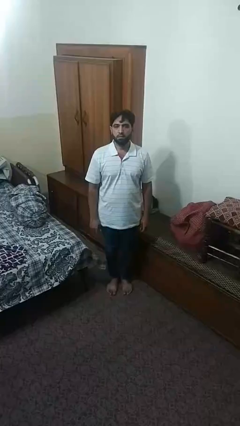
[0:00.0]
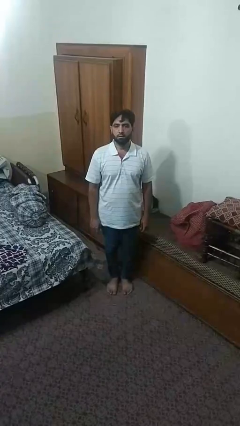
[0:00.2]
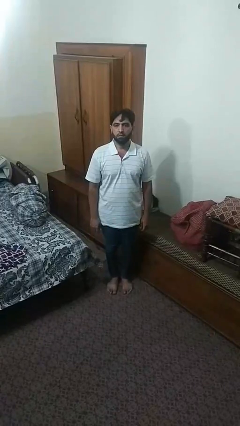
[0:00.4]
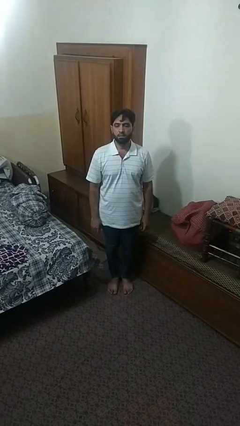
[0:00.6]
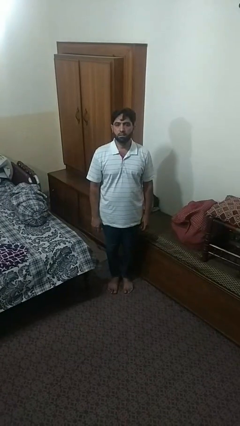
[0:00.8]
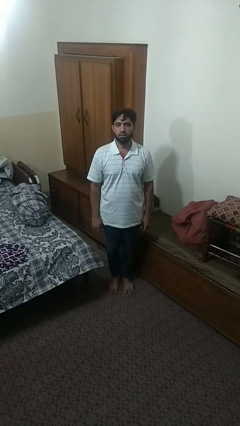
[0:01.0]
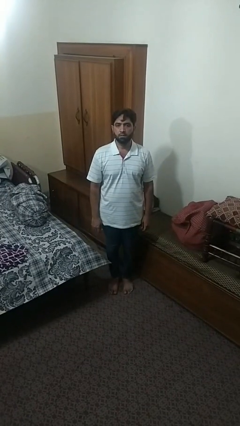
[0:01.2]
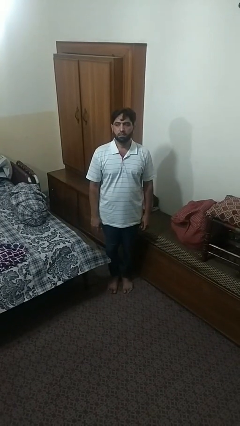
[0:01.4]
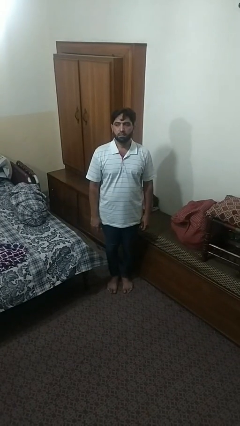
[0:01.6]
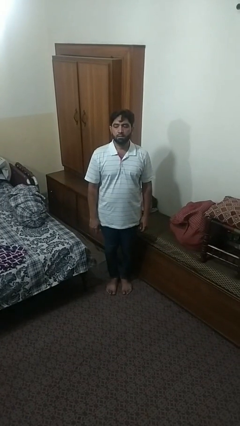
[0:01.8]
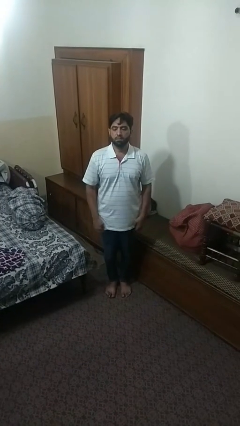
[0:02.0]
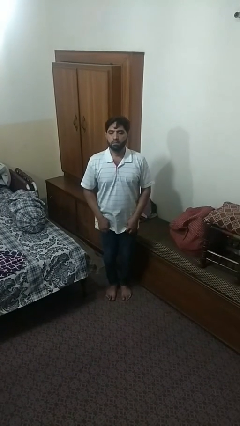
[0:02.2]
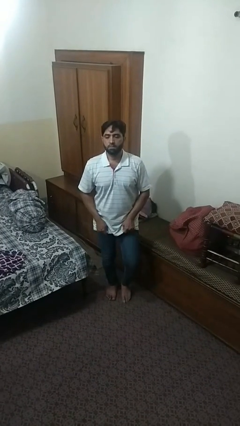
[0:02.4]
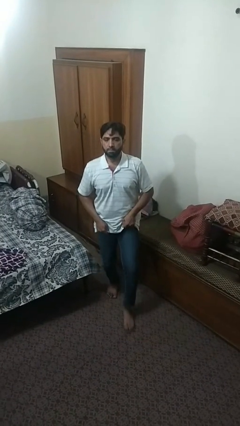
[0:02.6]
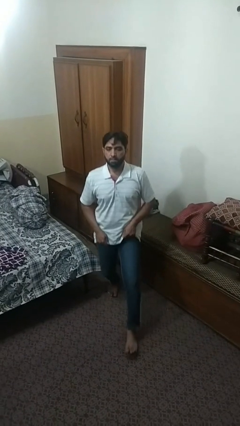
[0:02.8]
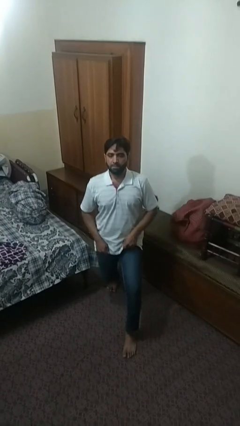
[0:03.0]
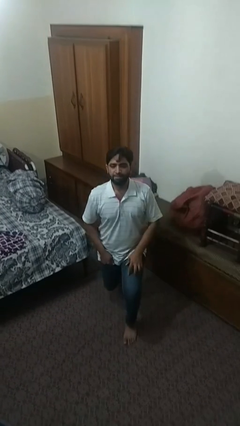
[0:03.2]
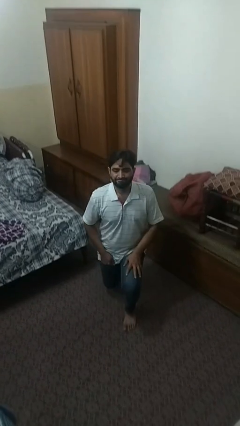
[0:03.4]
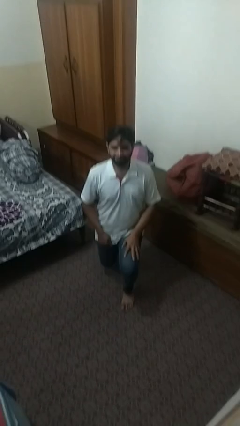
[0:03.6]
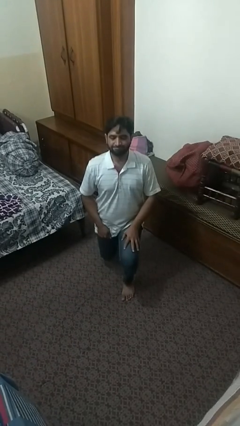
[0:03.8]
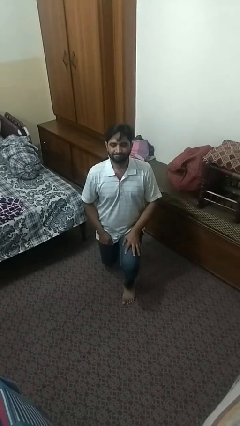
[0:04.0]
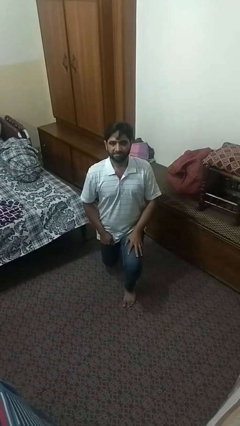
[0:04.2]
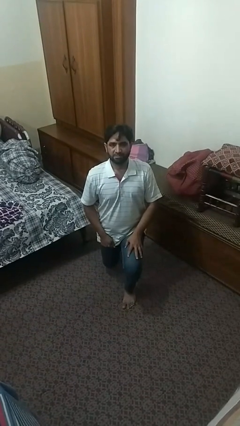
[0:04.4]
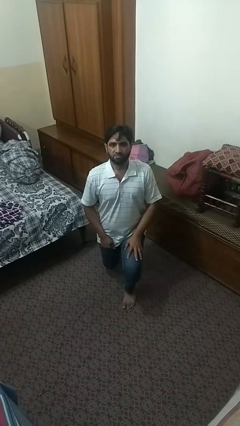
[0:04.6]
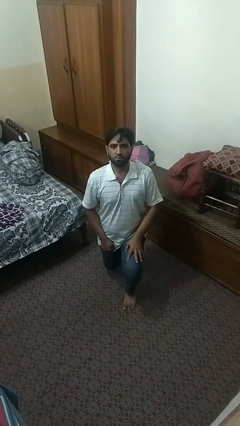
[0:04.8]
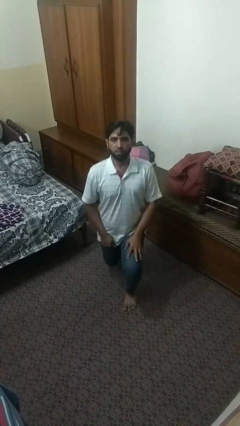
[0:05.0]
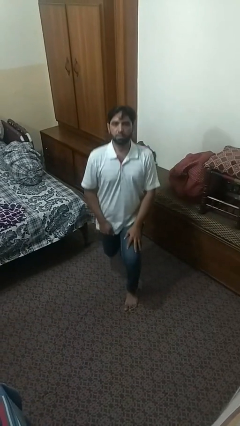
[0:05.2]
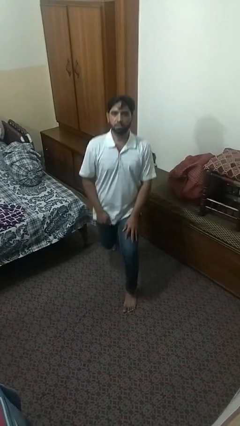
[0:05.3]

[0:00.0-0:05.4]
person exercises with lunges

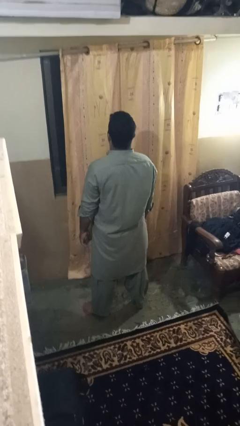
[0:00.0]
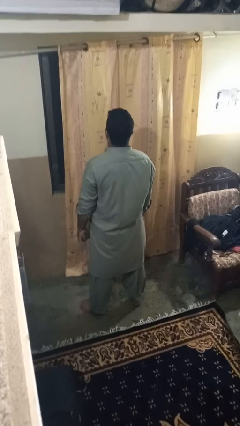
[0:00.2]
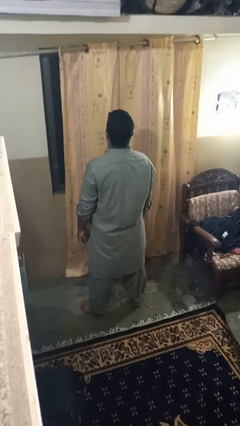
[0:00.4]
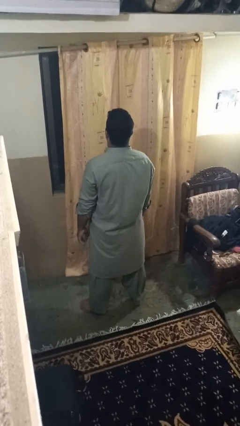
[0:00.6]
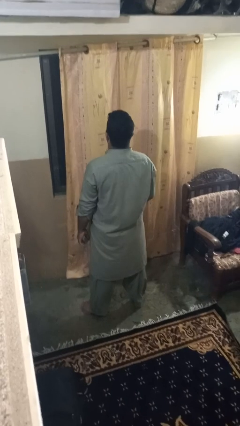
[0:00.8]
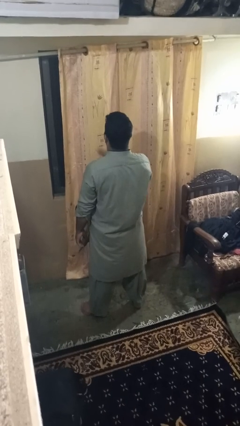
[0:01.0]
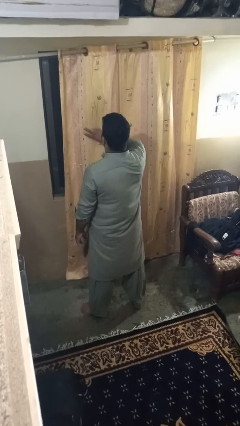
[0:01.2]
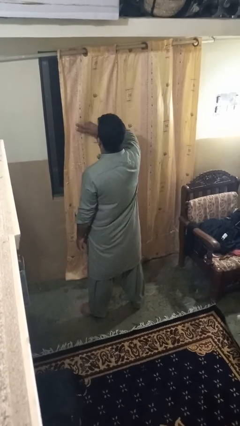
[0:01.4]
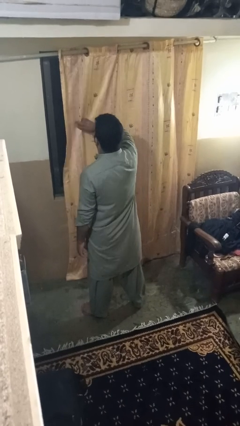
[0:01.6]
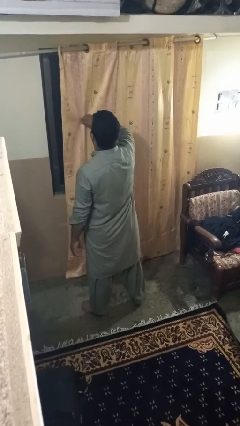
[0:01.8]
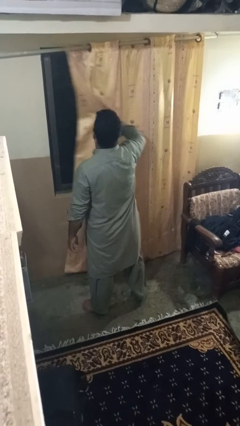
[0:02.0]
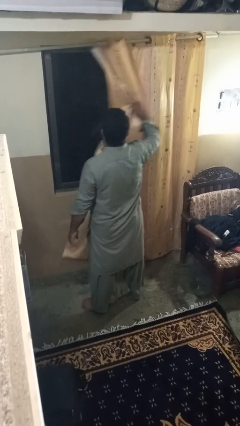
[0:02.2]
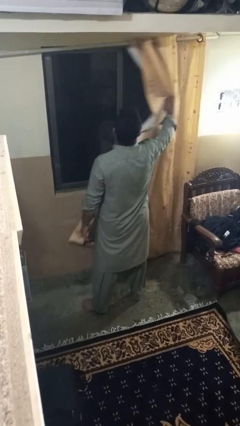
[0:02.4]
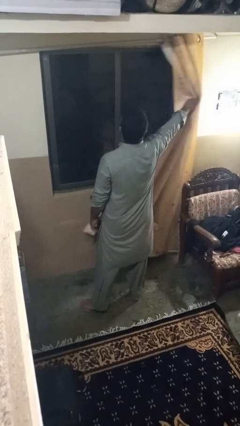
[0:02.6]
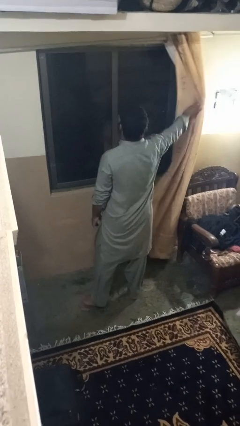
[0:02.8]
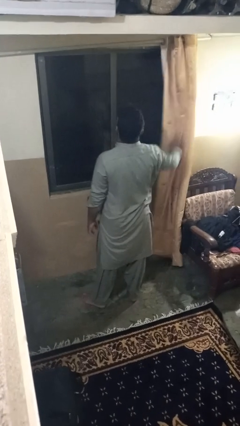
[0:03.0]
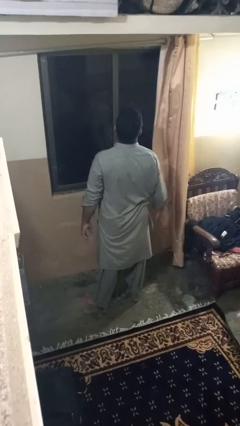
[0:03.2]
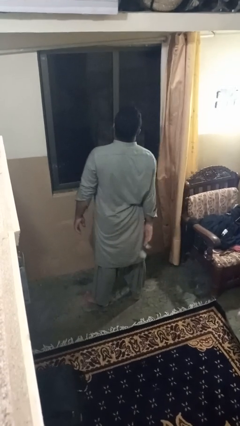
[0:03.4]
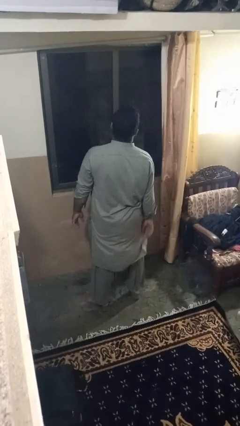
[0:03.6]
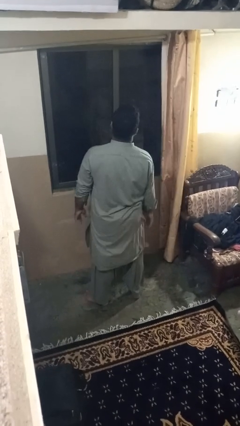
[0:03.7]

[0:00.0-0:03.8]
person opens curtains

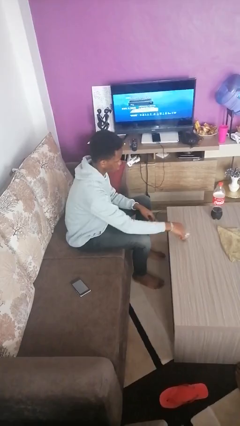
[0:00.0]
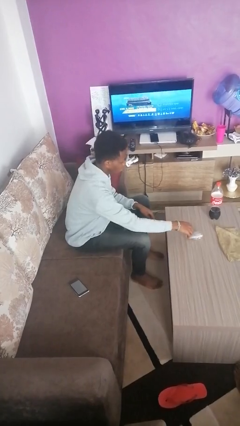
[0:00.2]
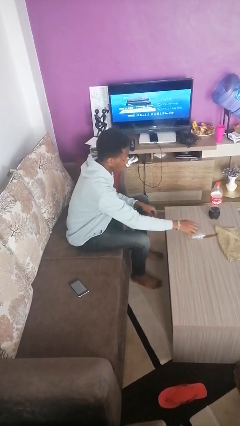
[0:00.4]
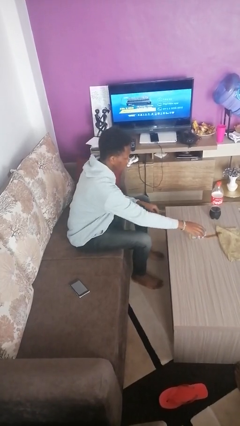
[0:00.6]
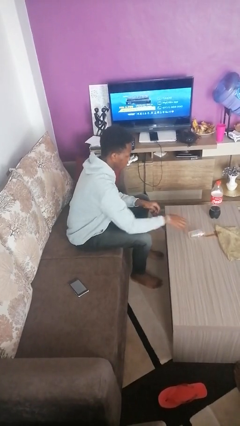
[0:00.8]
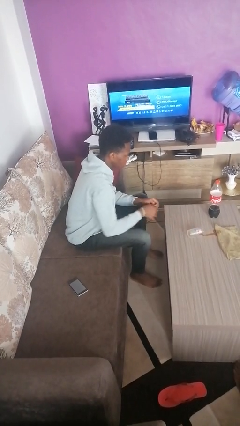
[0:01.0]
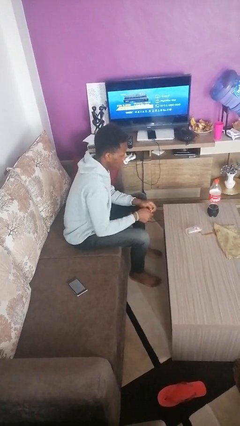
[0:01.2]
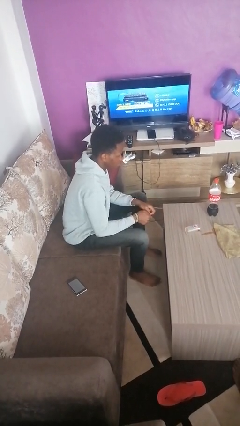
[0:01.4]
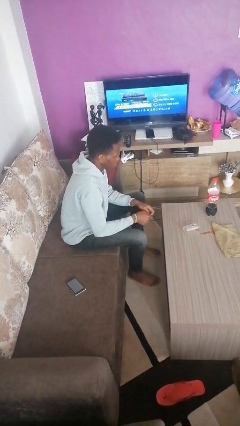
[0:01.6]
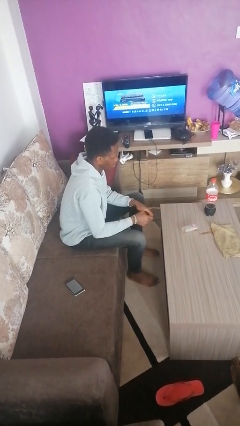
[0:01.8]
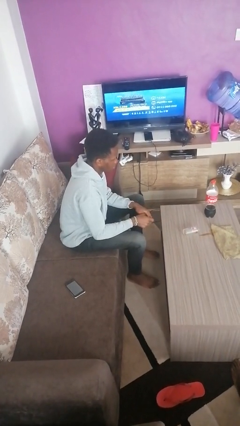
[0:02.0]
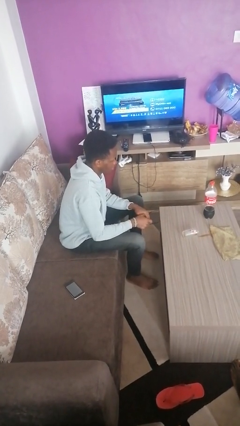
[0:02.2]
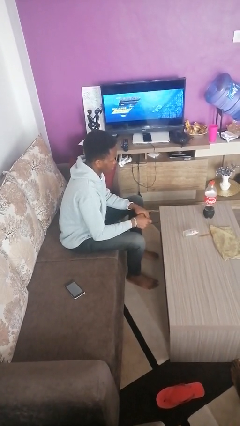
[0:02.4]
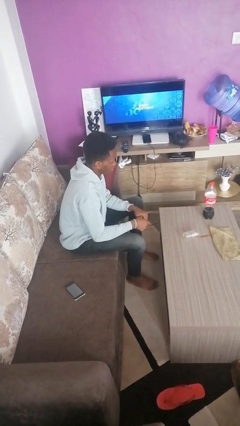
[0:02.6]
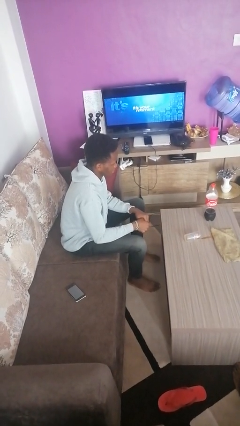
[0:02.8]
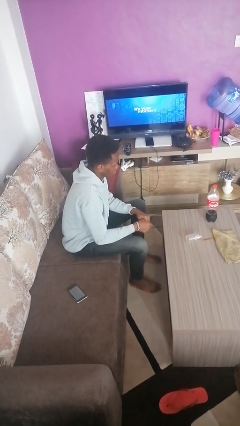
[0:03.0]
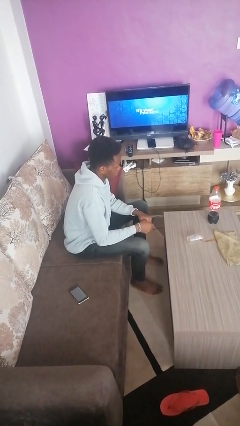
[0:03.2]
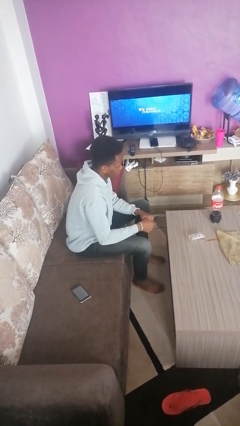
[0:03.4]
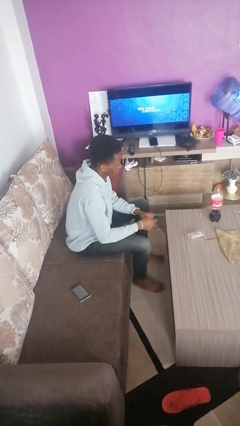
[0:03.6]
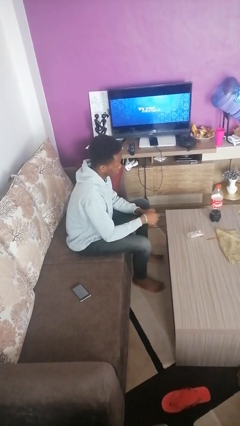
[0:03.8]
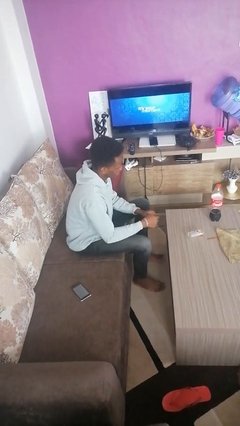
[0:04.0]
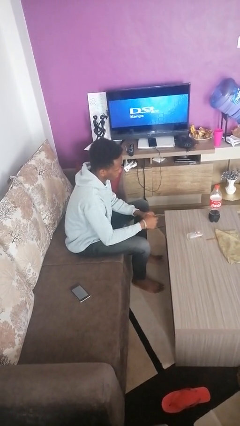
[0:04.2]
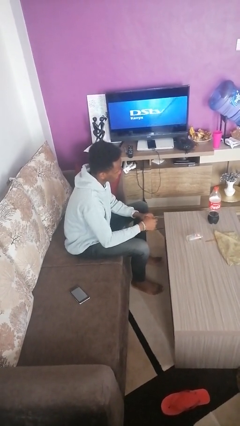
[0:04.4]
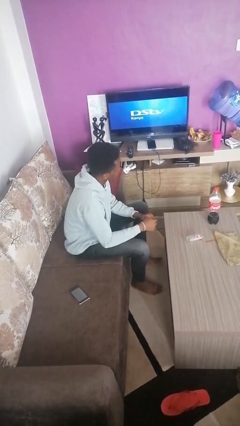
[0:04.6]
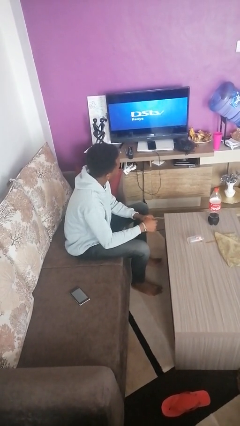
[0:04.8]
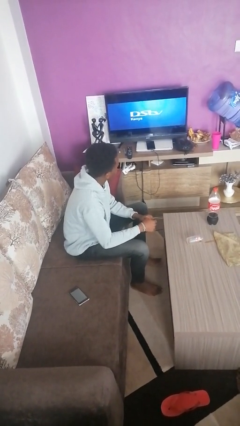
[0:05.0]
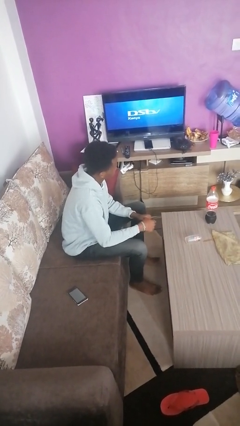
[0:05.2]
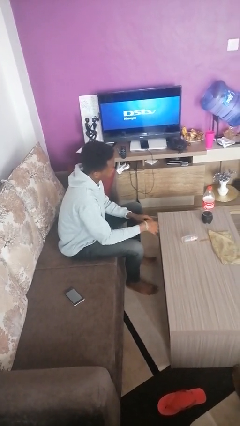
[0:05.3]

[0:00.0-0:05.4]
person spills on table

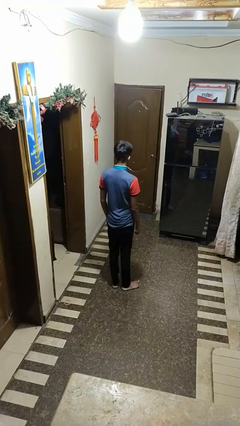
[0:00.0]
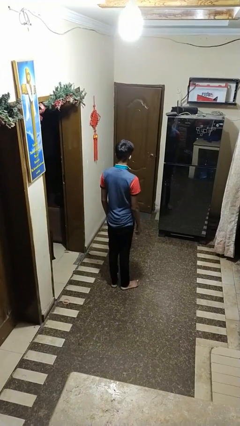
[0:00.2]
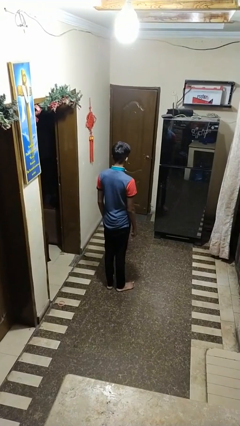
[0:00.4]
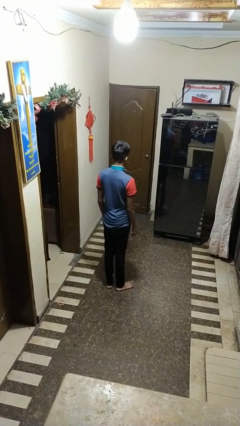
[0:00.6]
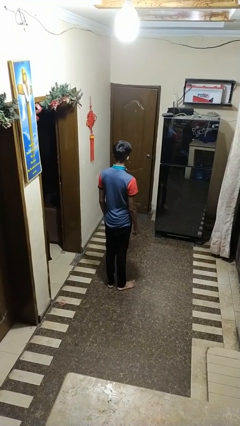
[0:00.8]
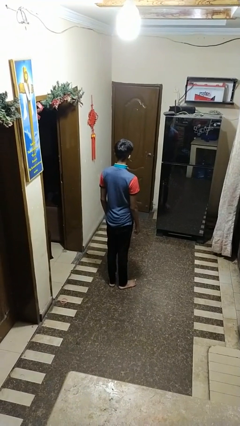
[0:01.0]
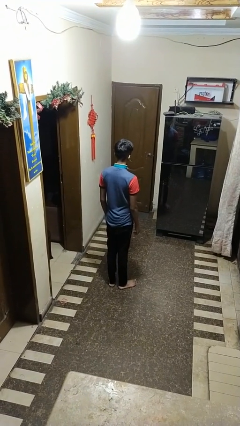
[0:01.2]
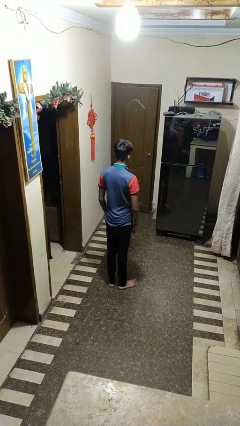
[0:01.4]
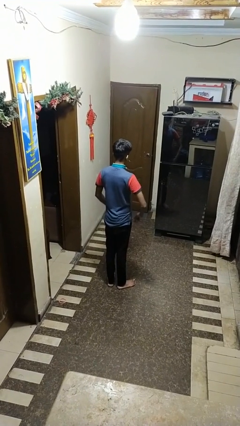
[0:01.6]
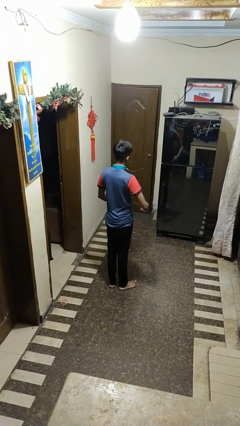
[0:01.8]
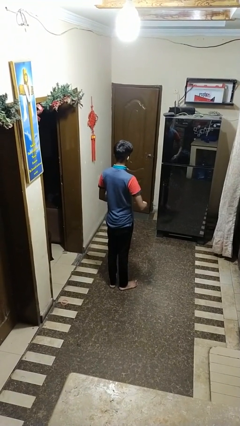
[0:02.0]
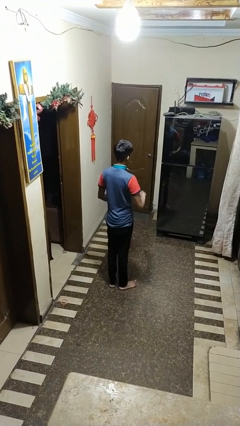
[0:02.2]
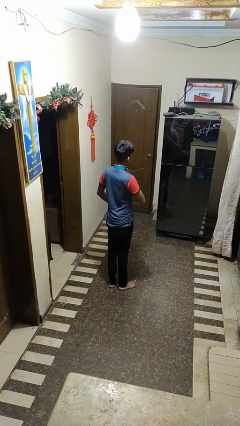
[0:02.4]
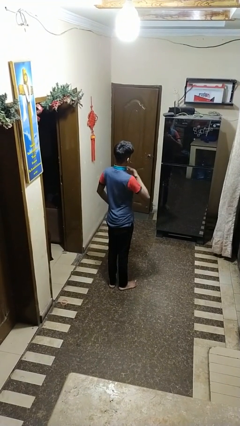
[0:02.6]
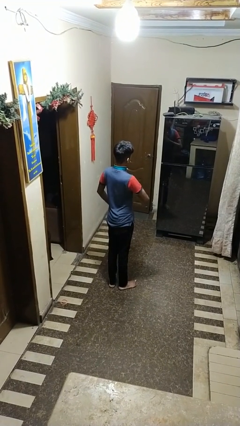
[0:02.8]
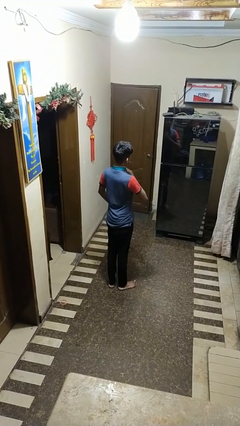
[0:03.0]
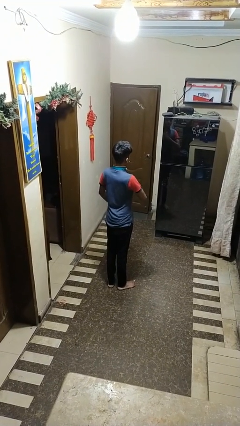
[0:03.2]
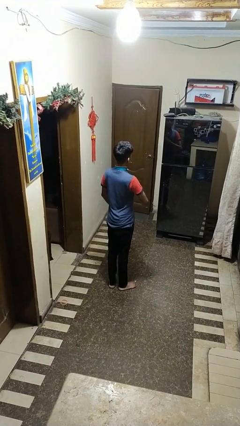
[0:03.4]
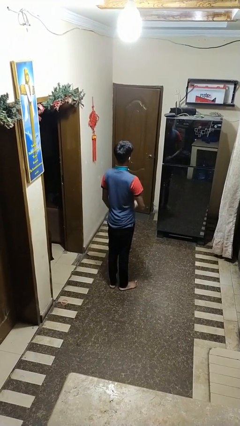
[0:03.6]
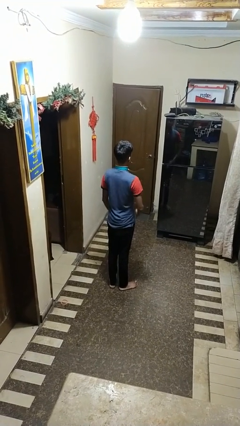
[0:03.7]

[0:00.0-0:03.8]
person drums on chest
